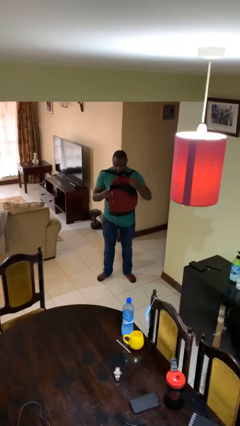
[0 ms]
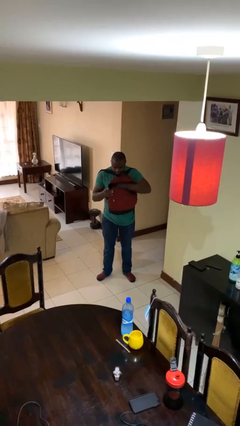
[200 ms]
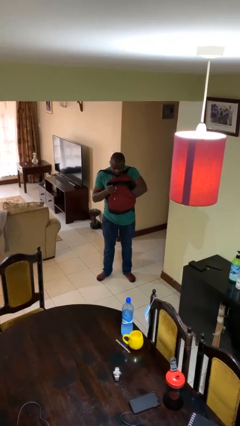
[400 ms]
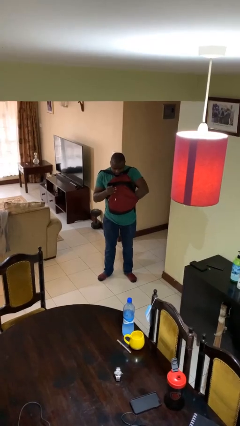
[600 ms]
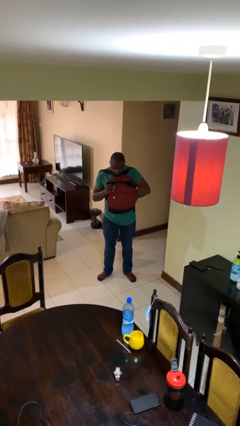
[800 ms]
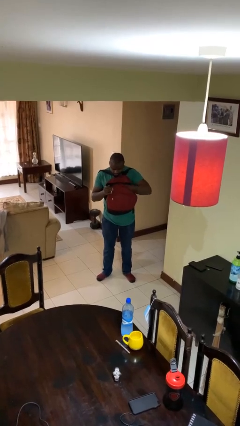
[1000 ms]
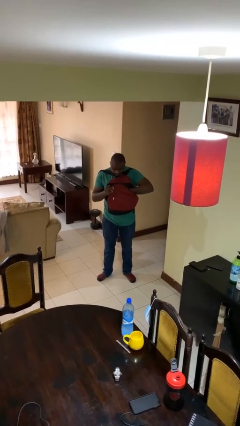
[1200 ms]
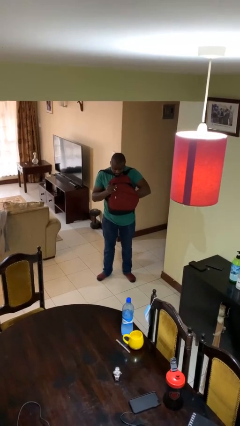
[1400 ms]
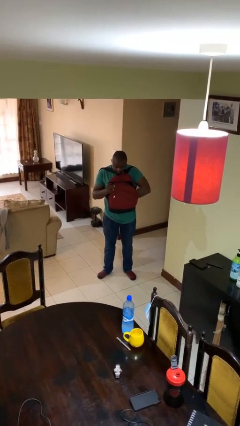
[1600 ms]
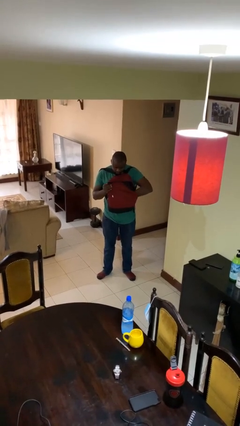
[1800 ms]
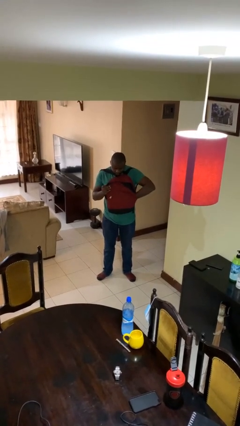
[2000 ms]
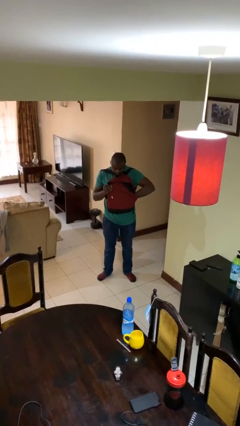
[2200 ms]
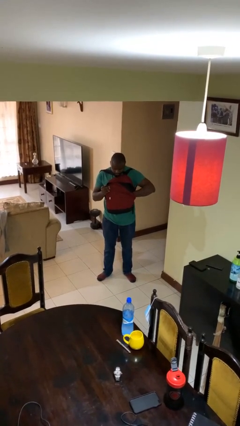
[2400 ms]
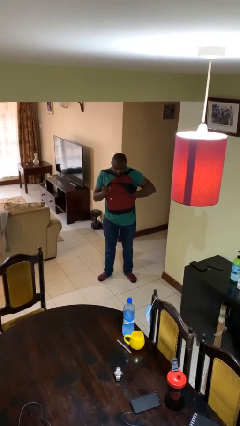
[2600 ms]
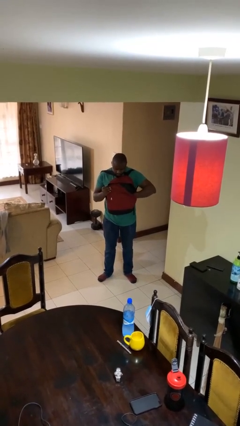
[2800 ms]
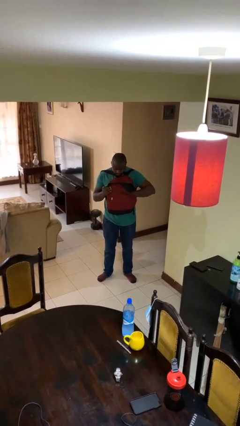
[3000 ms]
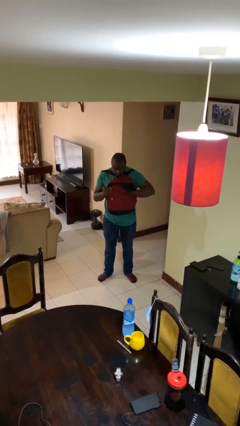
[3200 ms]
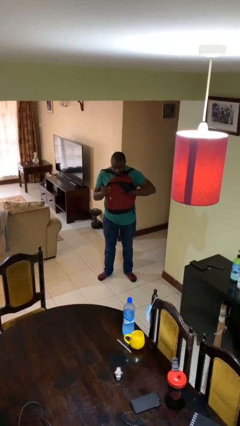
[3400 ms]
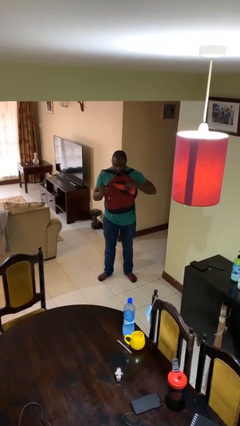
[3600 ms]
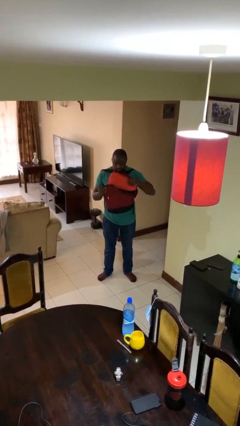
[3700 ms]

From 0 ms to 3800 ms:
person searches in backpack

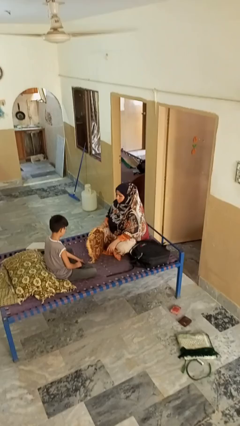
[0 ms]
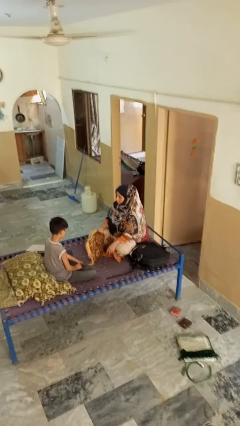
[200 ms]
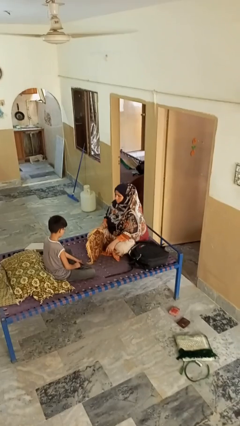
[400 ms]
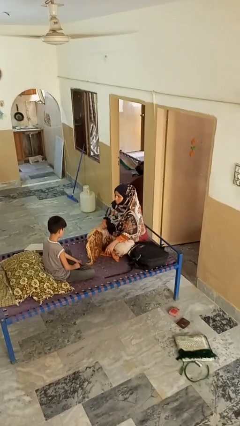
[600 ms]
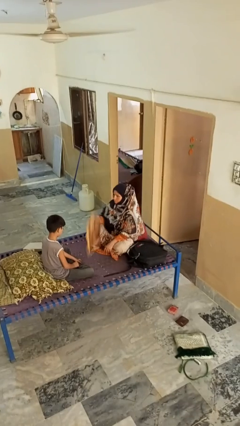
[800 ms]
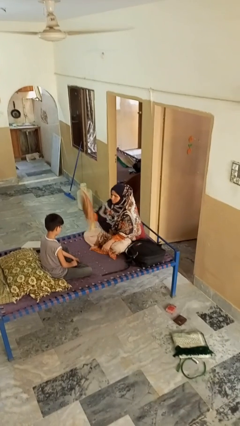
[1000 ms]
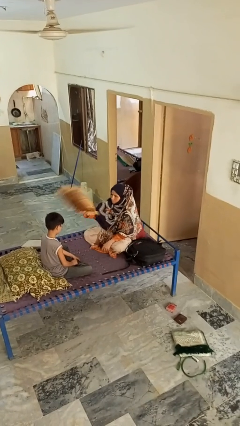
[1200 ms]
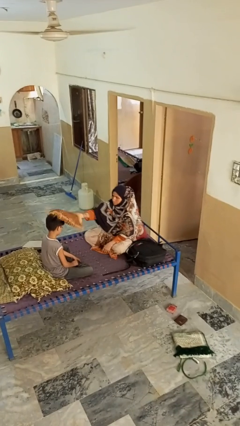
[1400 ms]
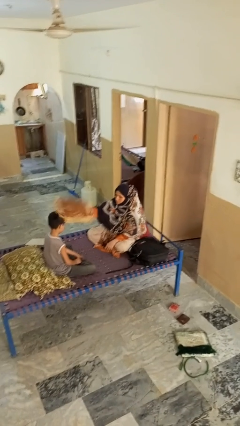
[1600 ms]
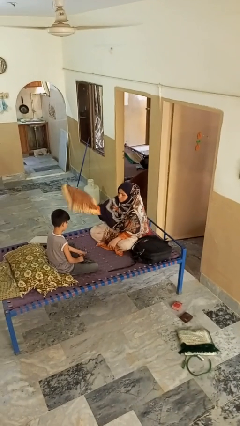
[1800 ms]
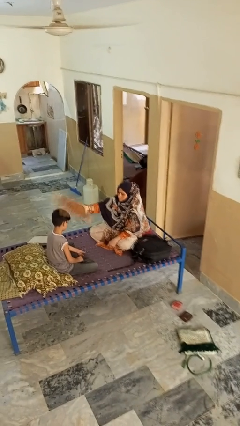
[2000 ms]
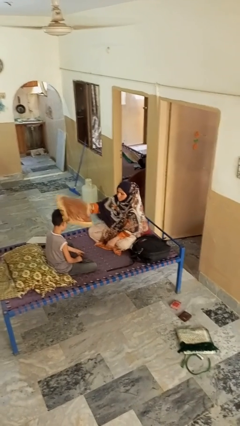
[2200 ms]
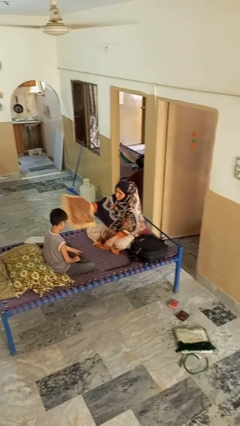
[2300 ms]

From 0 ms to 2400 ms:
person hits person with pillow

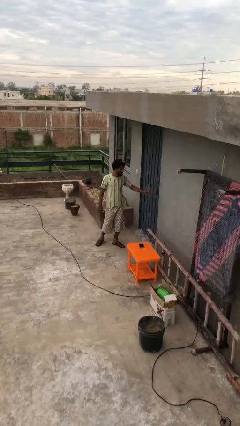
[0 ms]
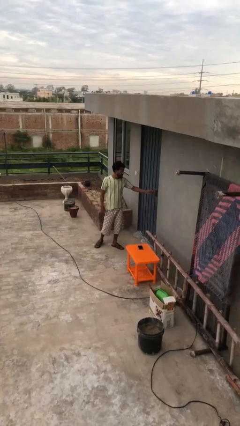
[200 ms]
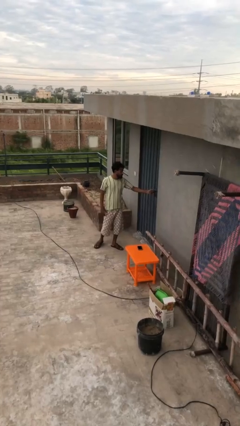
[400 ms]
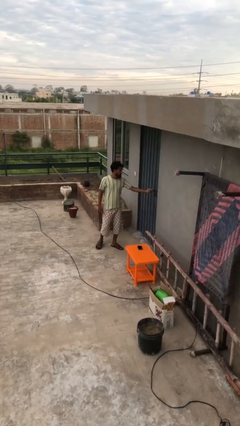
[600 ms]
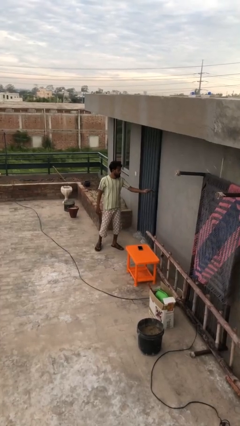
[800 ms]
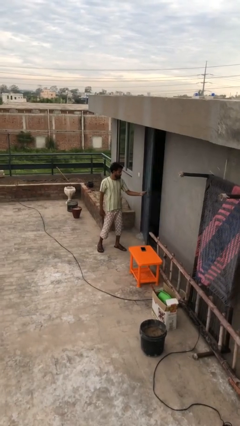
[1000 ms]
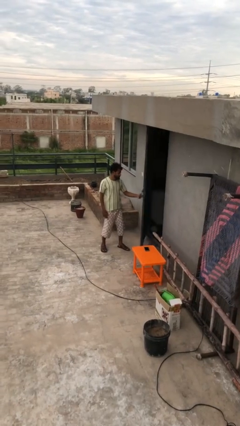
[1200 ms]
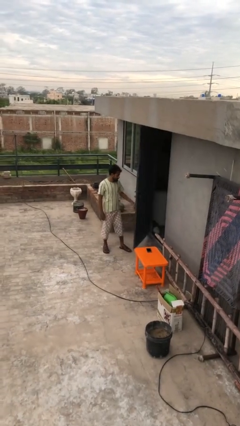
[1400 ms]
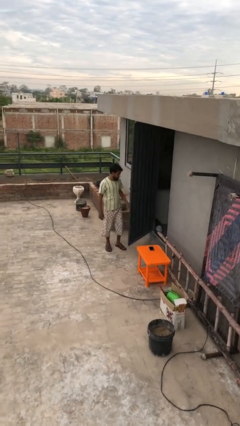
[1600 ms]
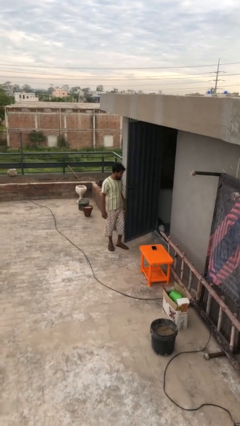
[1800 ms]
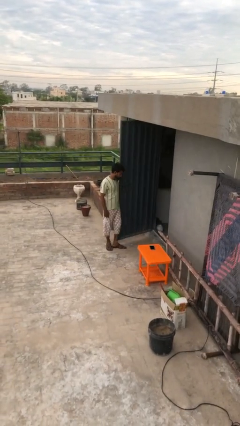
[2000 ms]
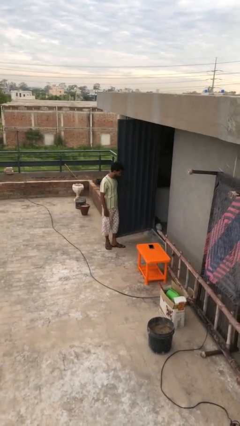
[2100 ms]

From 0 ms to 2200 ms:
person opens facility door

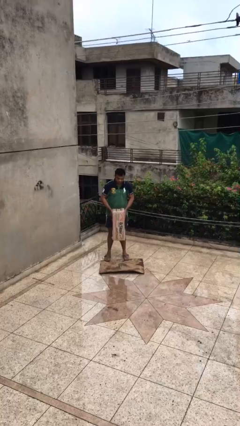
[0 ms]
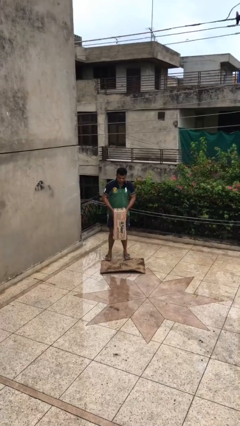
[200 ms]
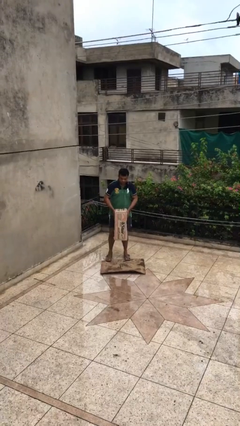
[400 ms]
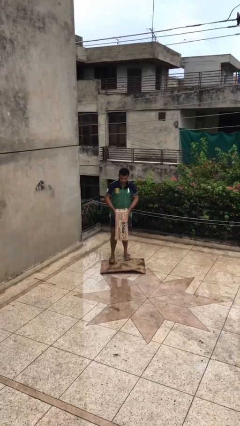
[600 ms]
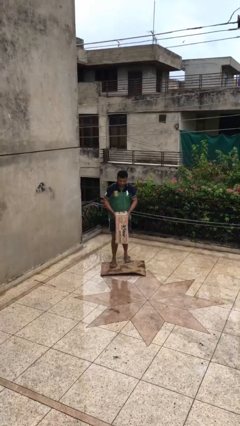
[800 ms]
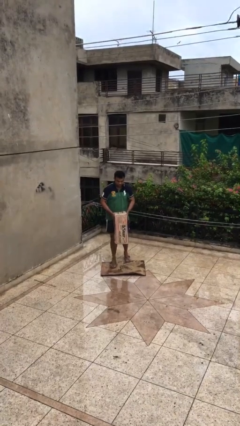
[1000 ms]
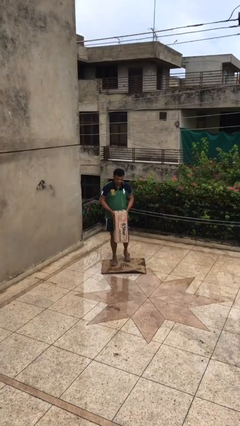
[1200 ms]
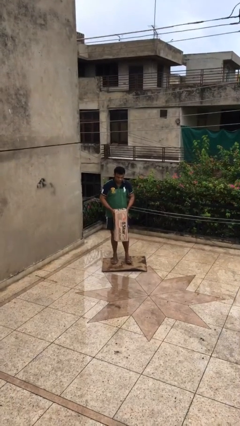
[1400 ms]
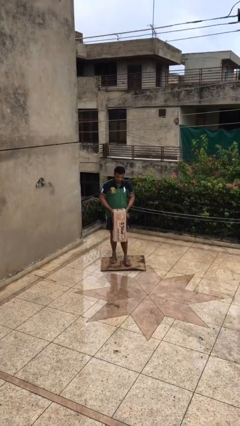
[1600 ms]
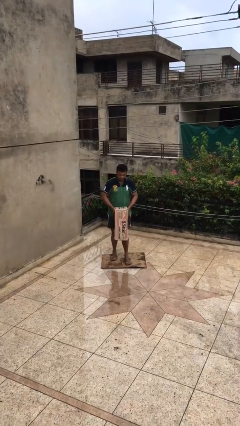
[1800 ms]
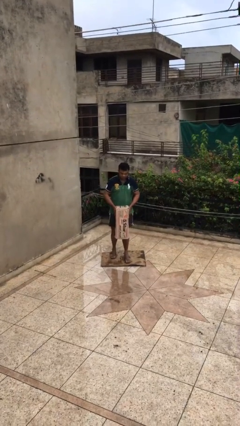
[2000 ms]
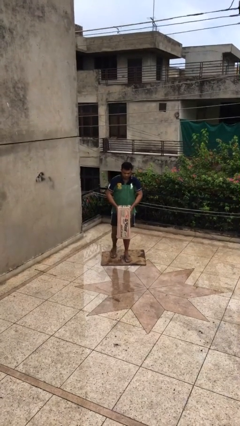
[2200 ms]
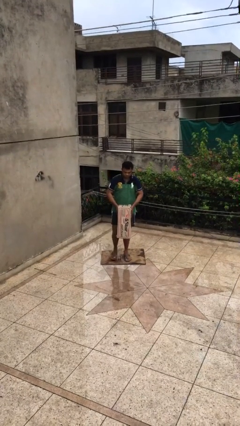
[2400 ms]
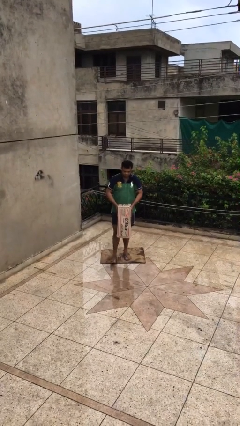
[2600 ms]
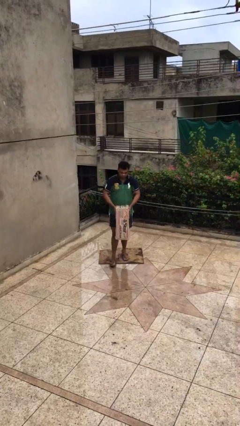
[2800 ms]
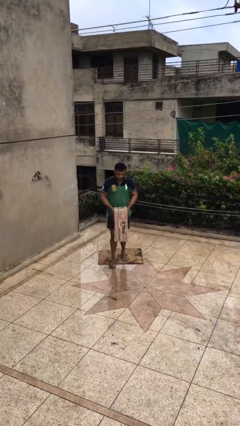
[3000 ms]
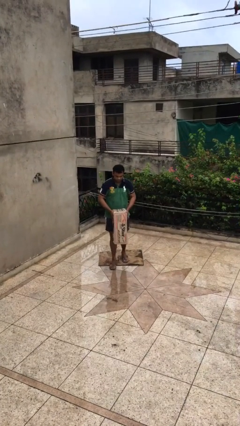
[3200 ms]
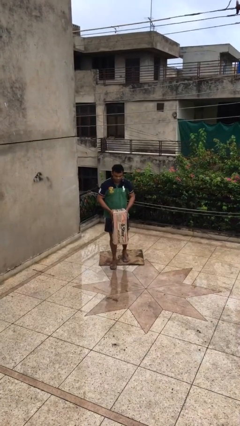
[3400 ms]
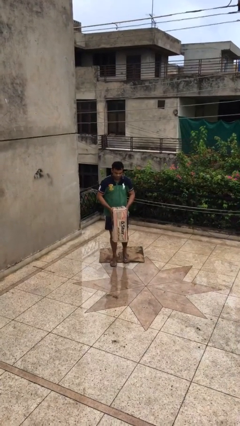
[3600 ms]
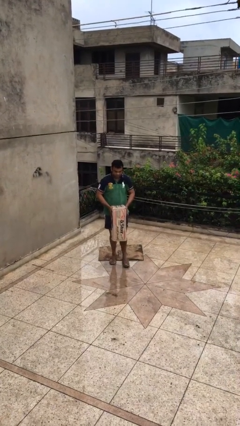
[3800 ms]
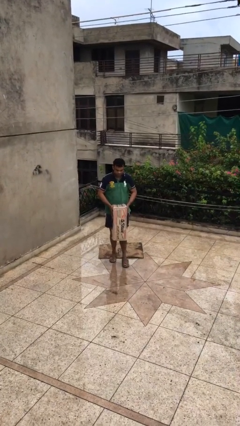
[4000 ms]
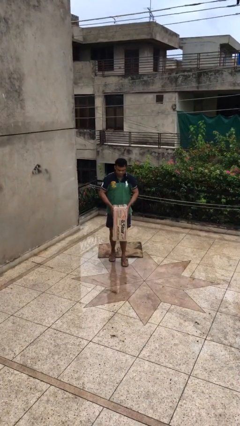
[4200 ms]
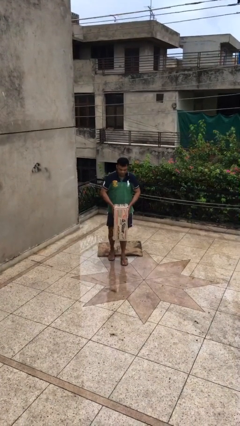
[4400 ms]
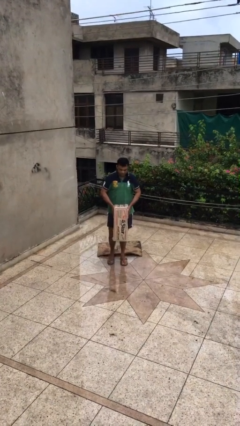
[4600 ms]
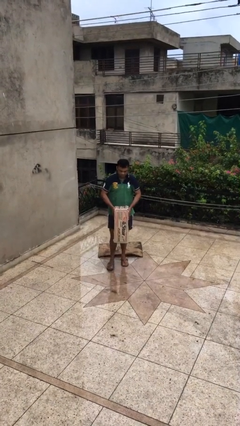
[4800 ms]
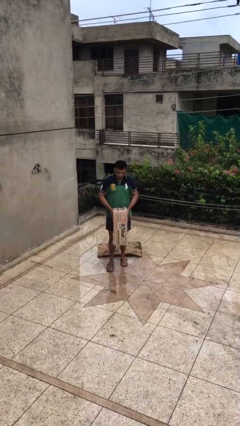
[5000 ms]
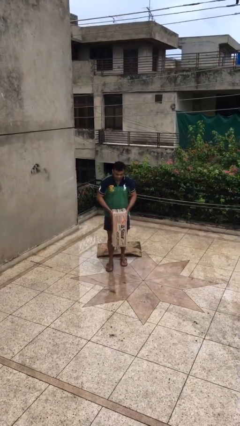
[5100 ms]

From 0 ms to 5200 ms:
person carries heavy object

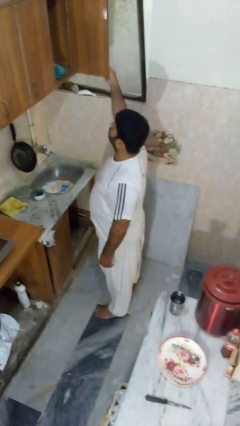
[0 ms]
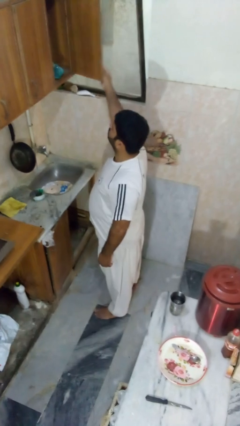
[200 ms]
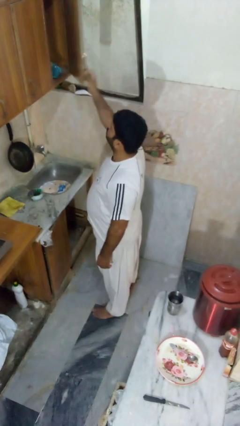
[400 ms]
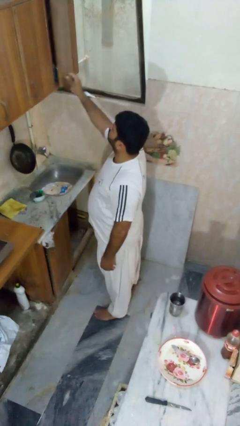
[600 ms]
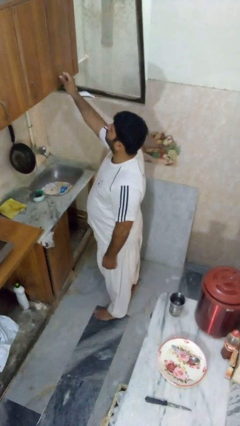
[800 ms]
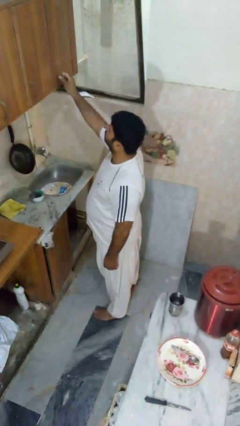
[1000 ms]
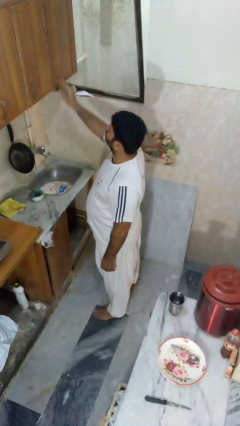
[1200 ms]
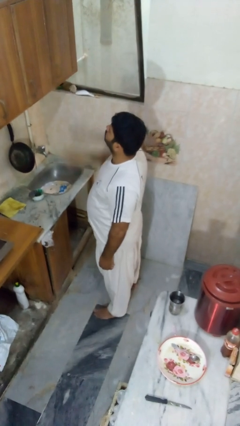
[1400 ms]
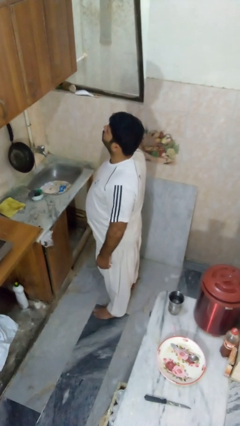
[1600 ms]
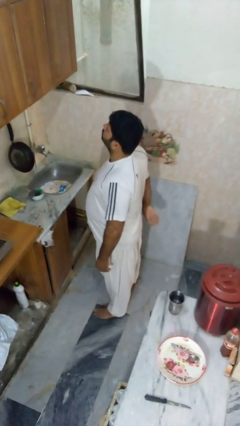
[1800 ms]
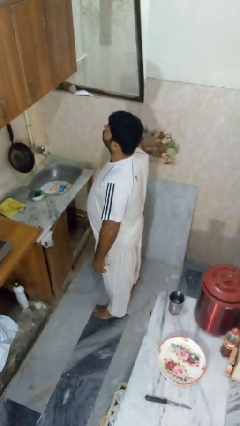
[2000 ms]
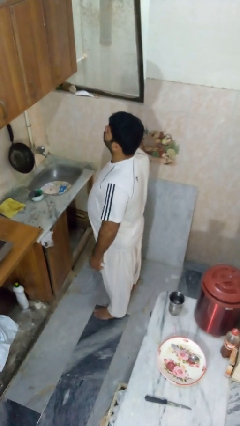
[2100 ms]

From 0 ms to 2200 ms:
person closes cabinet

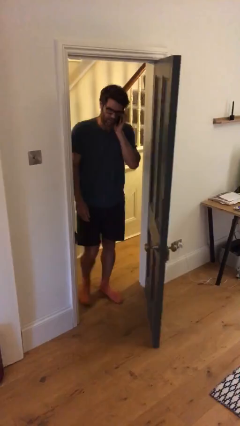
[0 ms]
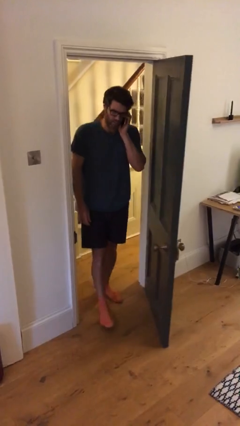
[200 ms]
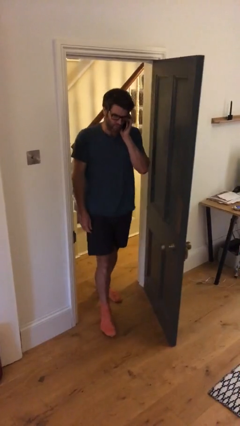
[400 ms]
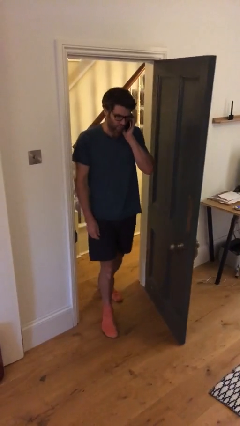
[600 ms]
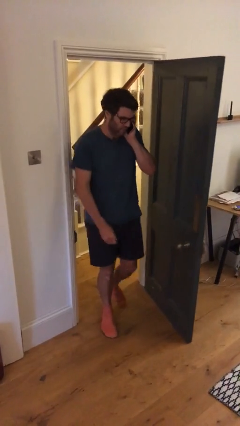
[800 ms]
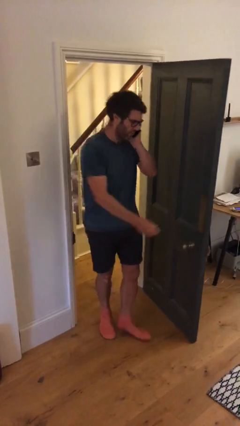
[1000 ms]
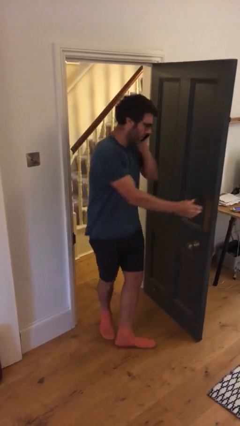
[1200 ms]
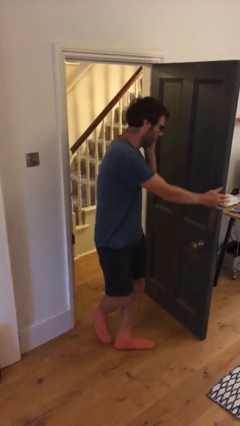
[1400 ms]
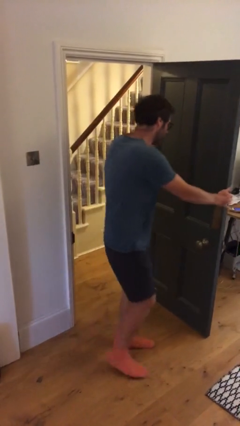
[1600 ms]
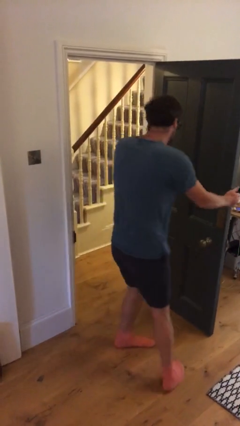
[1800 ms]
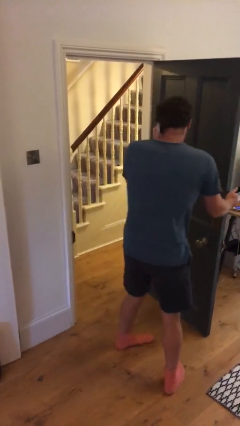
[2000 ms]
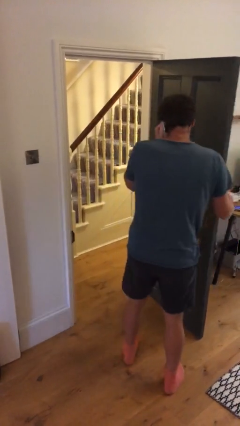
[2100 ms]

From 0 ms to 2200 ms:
person enters scene through structure
